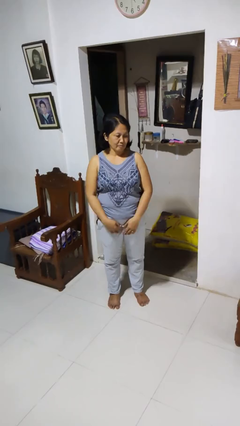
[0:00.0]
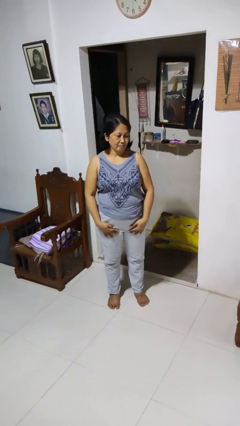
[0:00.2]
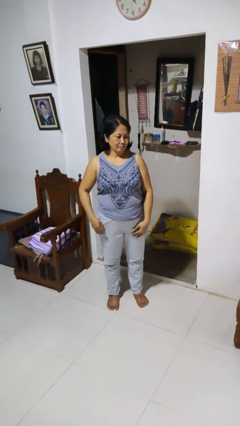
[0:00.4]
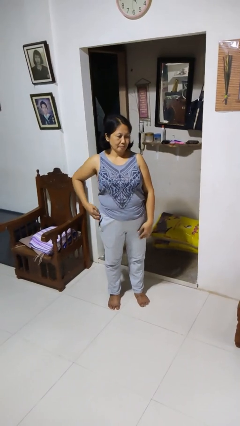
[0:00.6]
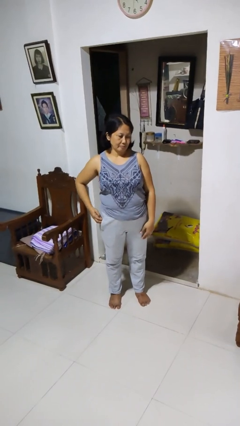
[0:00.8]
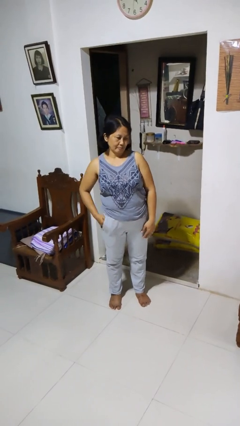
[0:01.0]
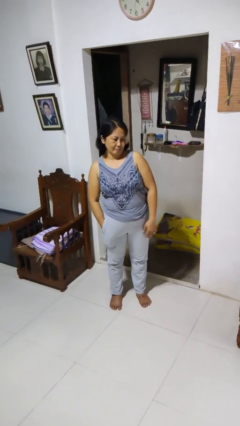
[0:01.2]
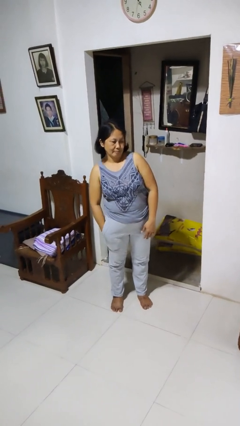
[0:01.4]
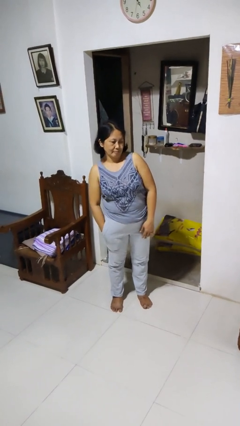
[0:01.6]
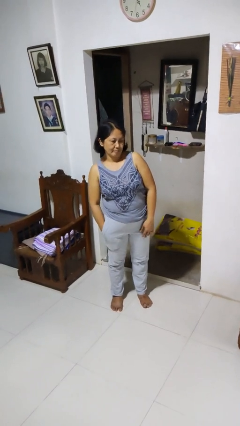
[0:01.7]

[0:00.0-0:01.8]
person puts hands in back pockets

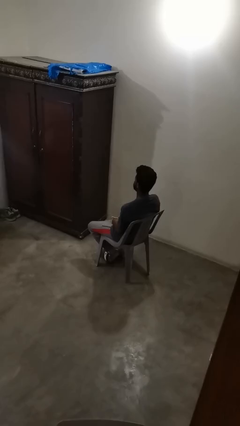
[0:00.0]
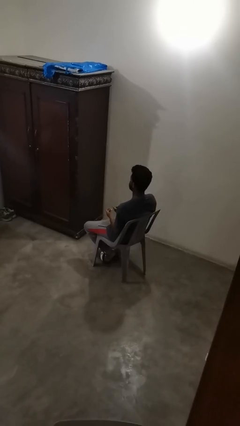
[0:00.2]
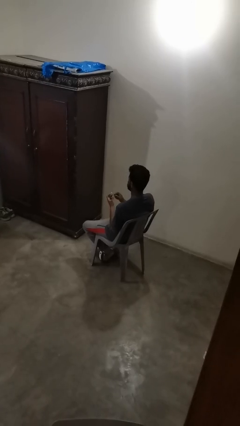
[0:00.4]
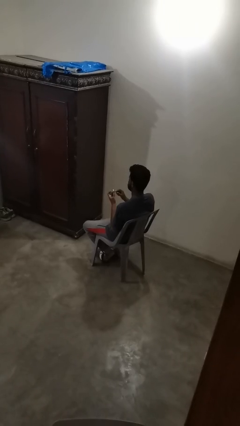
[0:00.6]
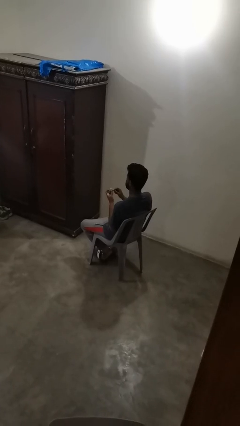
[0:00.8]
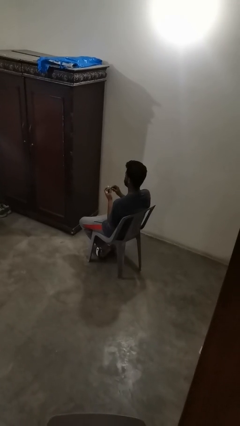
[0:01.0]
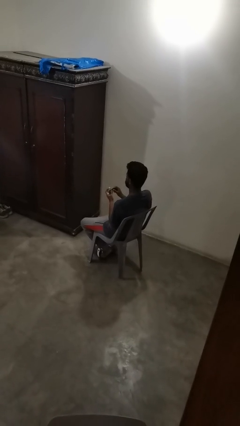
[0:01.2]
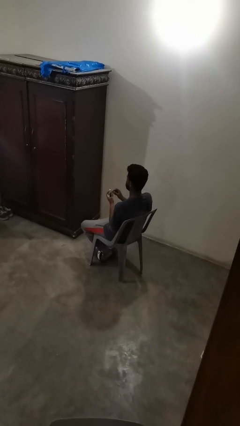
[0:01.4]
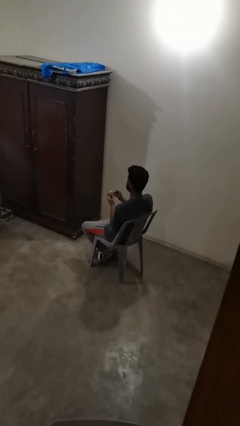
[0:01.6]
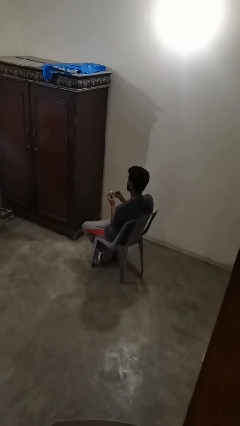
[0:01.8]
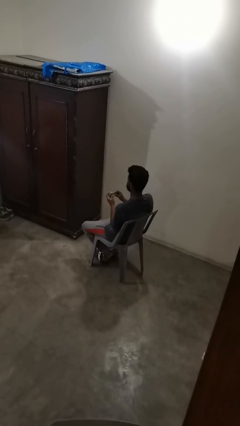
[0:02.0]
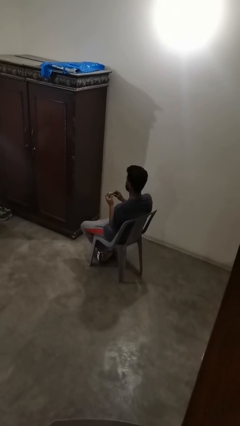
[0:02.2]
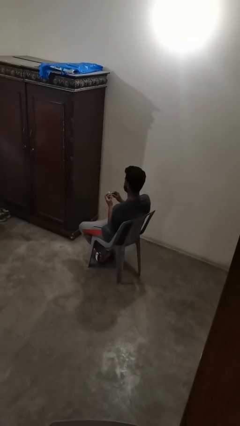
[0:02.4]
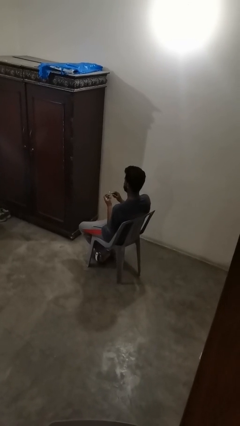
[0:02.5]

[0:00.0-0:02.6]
person files fingernails

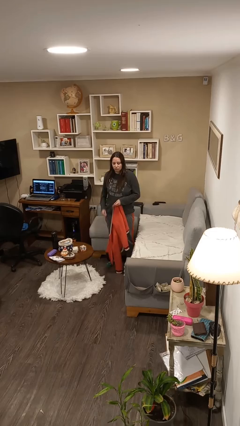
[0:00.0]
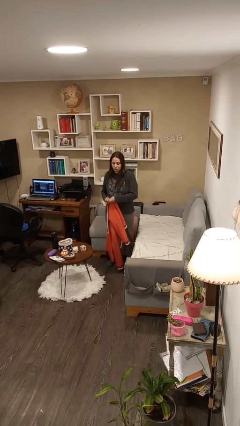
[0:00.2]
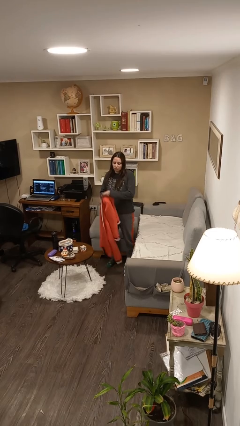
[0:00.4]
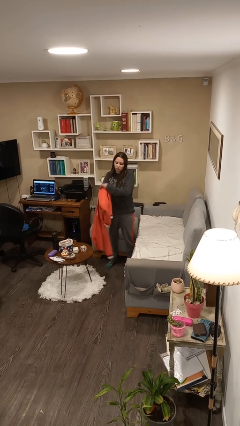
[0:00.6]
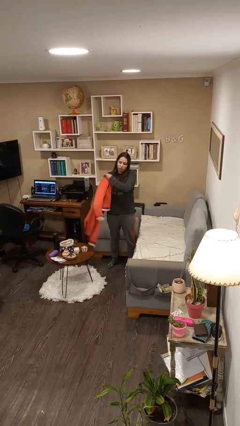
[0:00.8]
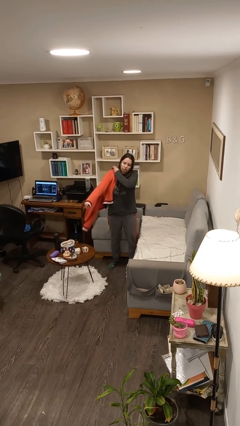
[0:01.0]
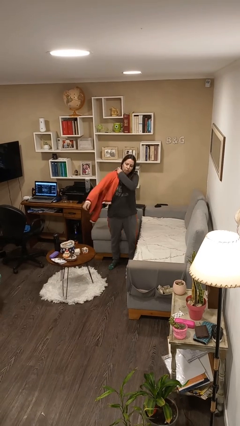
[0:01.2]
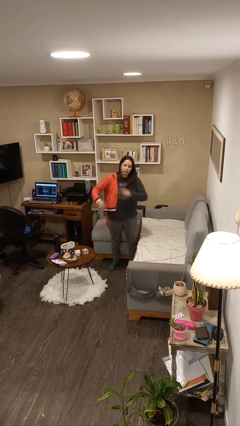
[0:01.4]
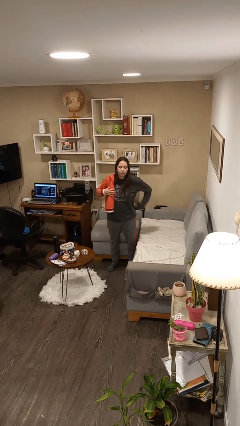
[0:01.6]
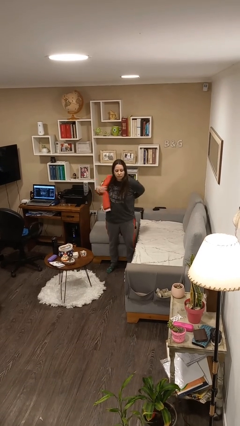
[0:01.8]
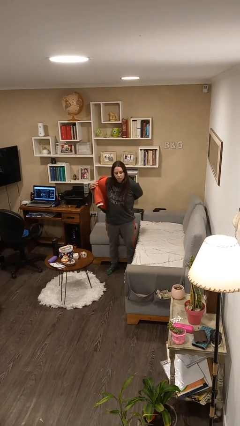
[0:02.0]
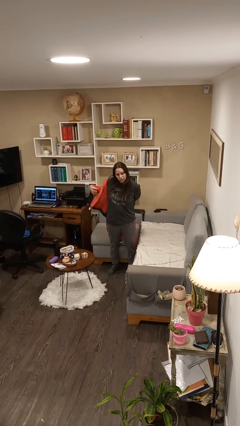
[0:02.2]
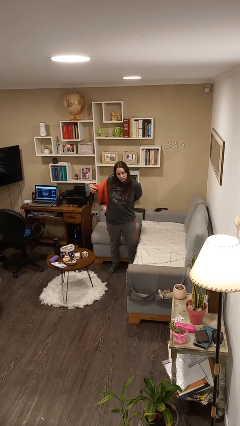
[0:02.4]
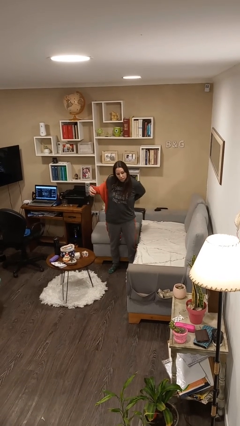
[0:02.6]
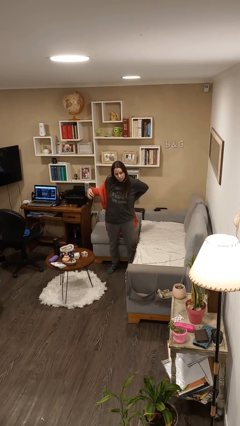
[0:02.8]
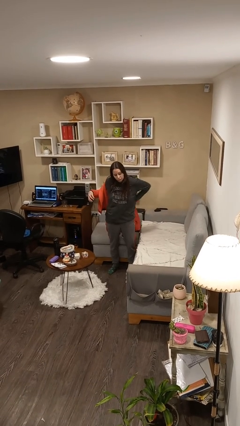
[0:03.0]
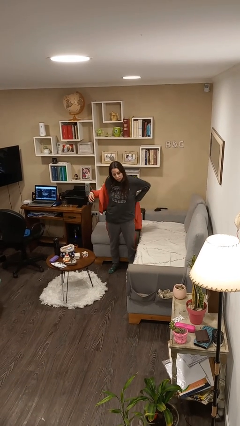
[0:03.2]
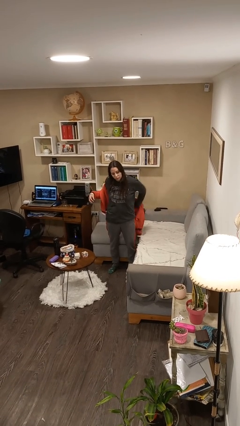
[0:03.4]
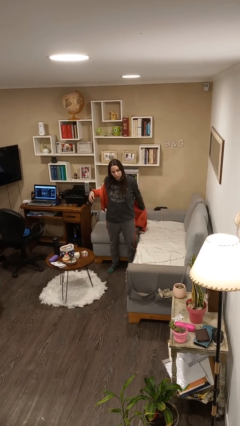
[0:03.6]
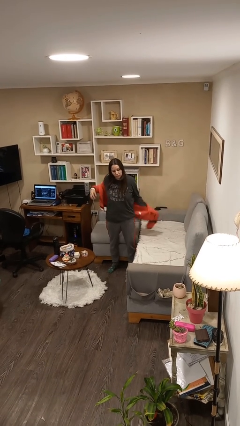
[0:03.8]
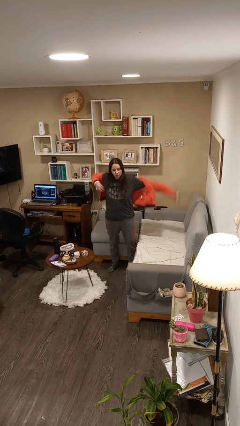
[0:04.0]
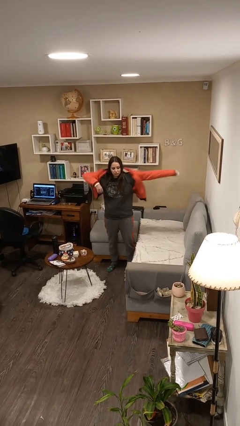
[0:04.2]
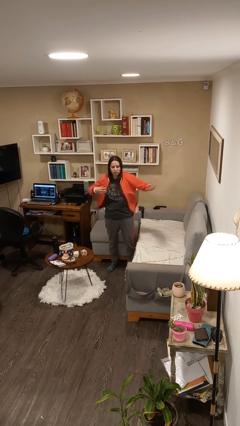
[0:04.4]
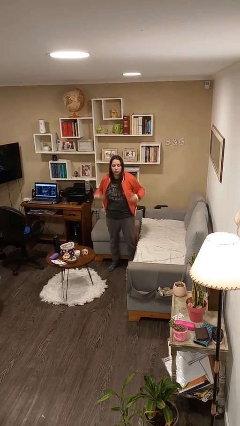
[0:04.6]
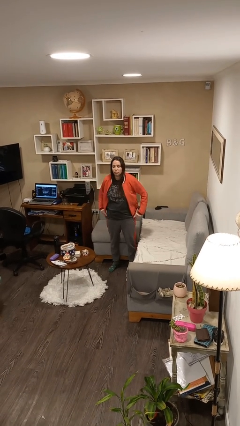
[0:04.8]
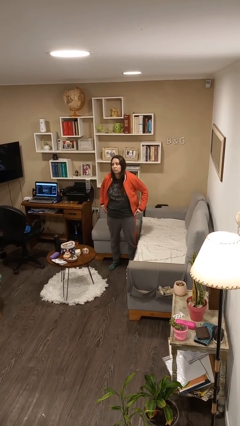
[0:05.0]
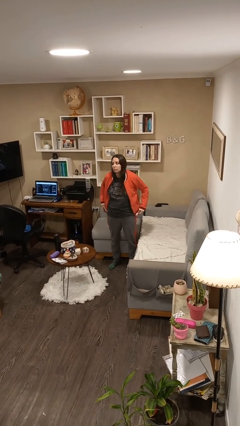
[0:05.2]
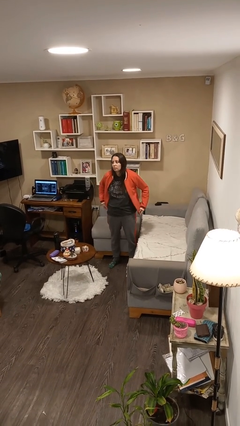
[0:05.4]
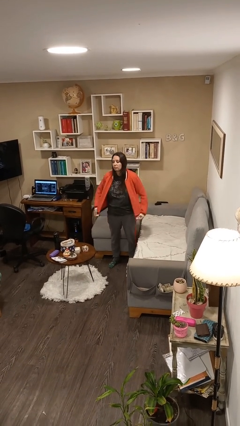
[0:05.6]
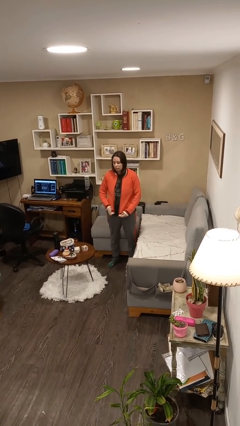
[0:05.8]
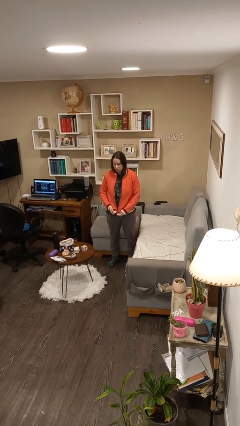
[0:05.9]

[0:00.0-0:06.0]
person puts on jacket

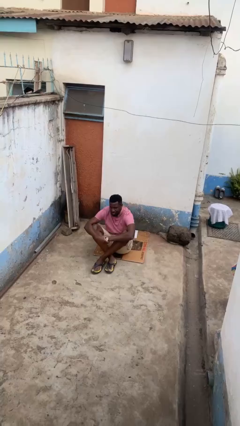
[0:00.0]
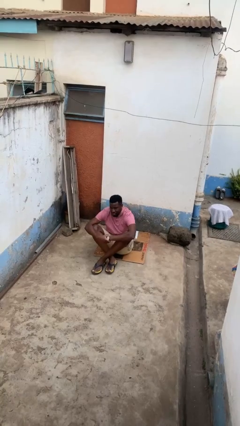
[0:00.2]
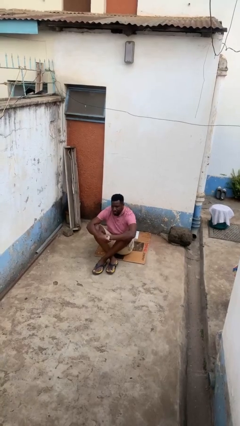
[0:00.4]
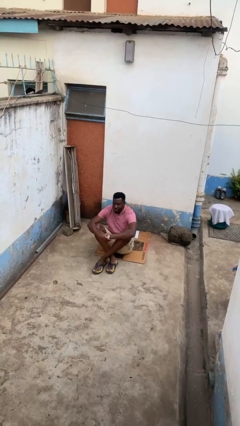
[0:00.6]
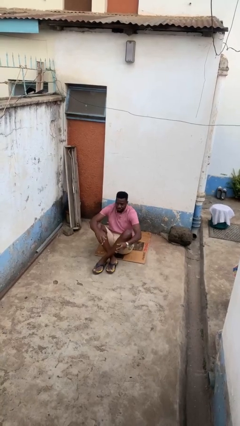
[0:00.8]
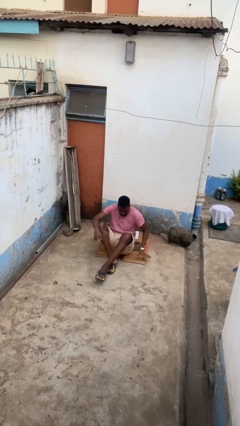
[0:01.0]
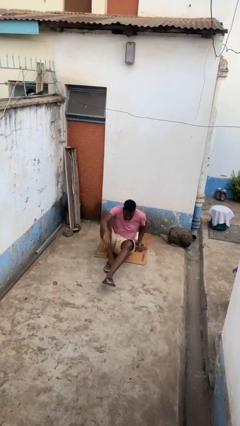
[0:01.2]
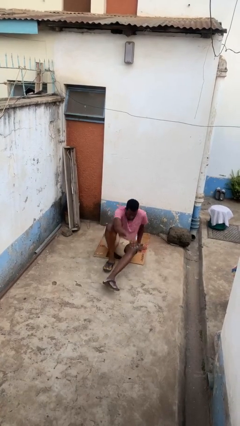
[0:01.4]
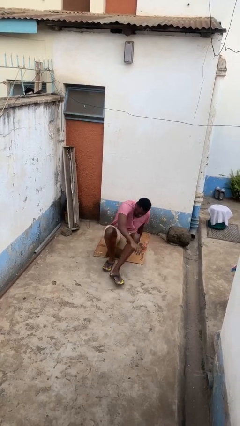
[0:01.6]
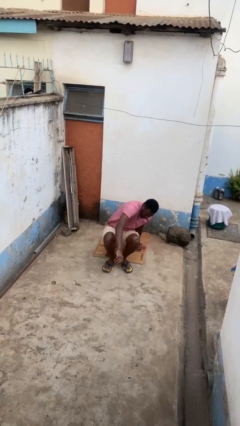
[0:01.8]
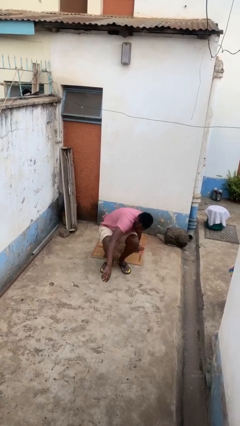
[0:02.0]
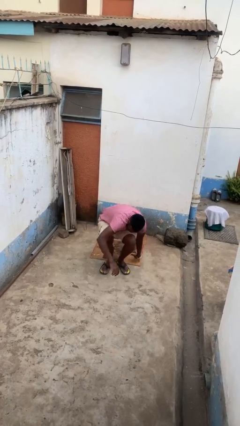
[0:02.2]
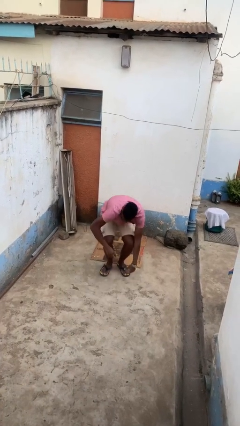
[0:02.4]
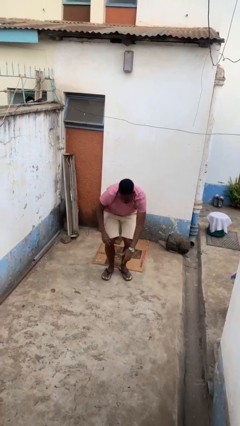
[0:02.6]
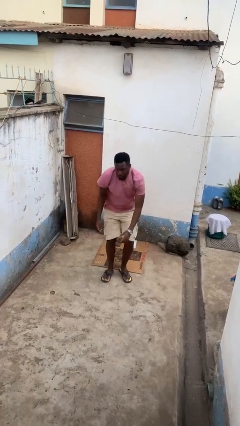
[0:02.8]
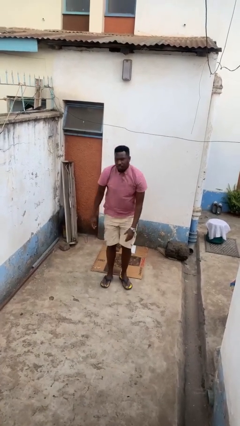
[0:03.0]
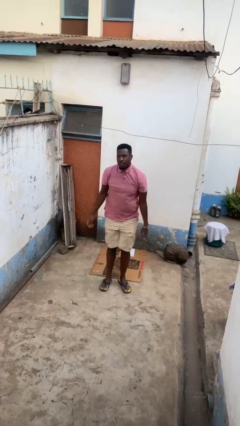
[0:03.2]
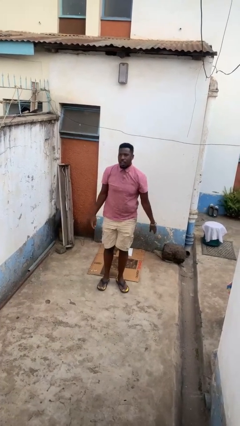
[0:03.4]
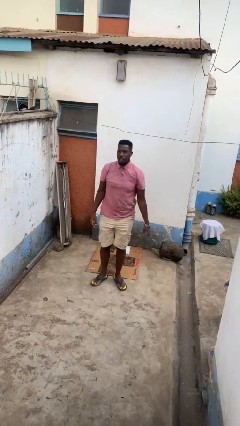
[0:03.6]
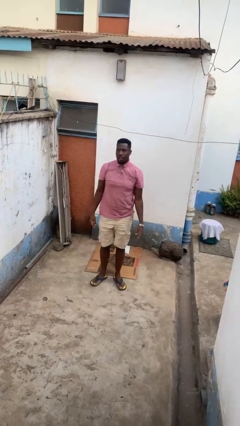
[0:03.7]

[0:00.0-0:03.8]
person stands up from floor

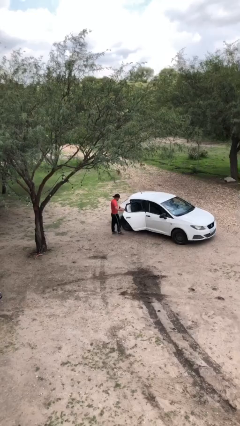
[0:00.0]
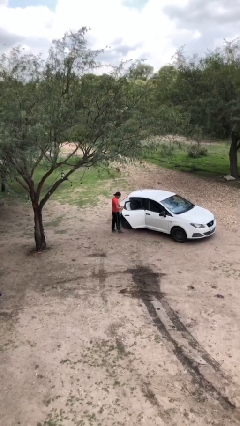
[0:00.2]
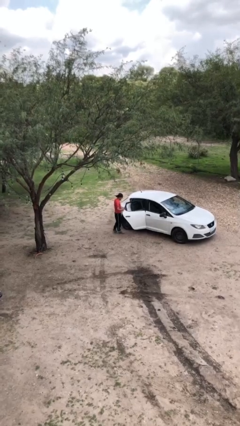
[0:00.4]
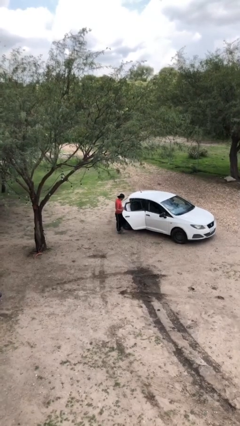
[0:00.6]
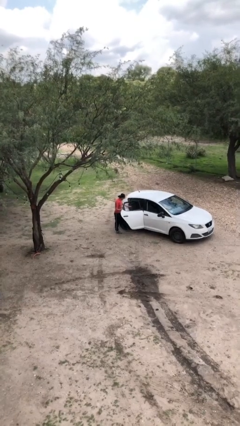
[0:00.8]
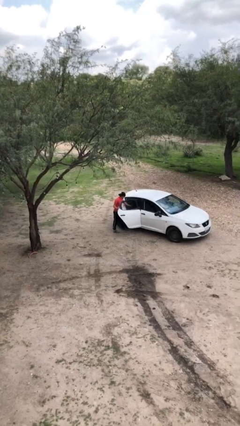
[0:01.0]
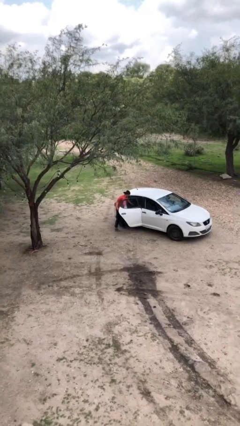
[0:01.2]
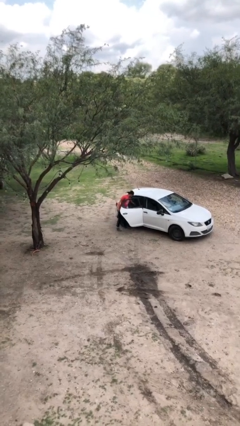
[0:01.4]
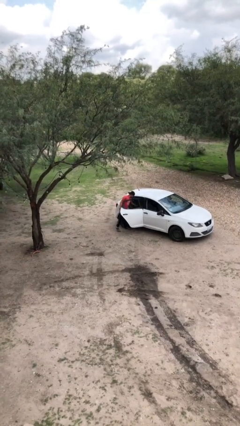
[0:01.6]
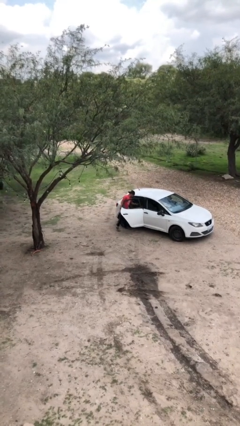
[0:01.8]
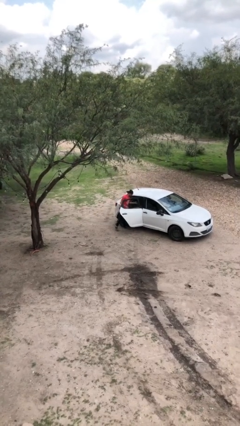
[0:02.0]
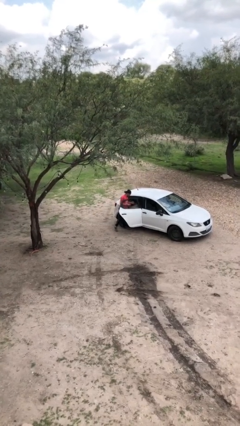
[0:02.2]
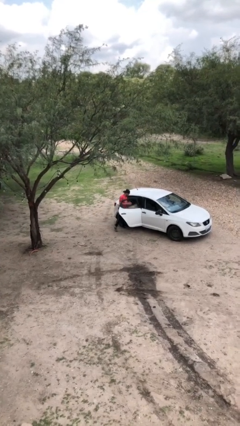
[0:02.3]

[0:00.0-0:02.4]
person unloads car

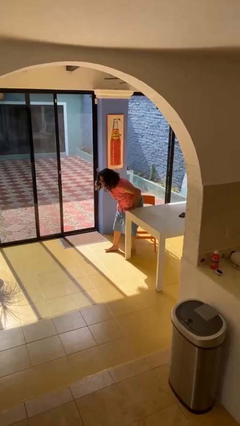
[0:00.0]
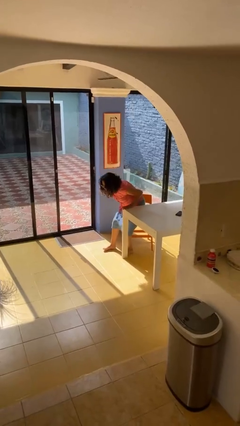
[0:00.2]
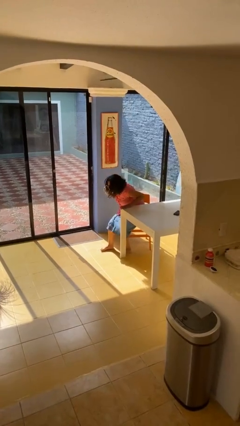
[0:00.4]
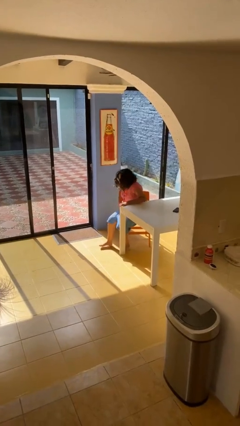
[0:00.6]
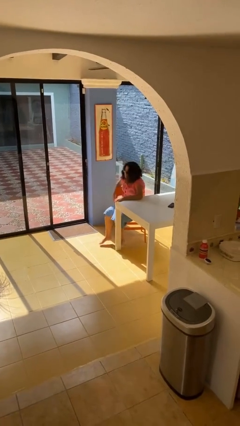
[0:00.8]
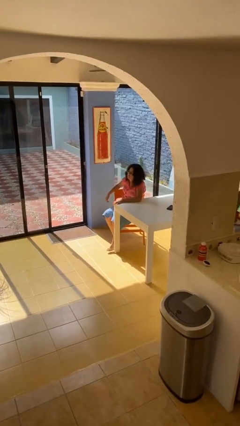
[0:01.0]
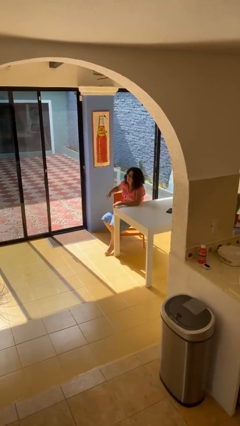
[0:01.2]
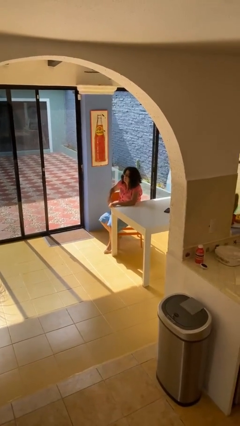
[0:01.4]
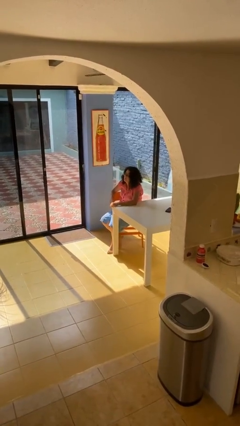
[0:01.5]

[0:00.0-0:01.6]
person sits down
